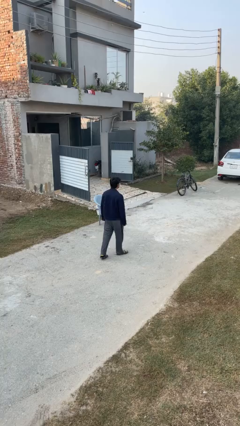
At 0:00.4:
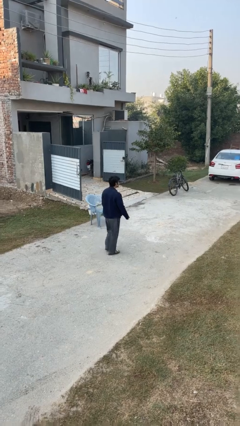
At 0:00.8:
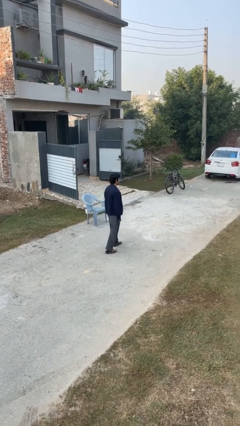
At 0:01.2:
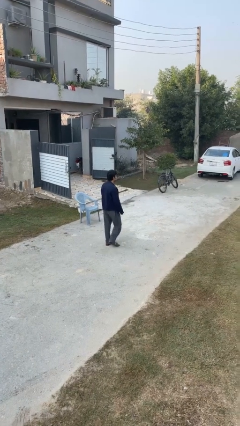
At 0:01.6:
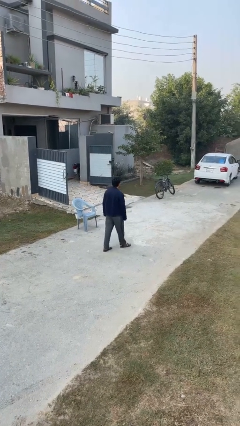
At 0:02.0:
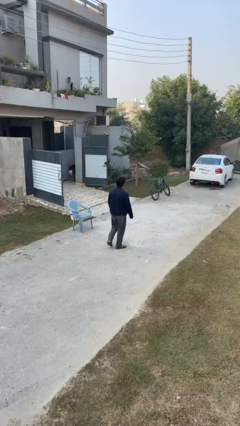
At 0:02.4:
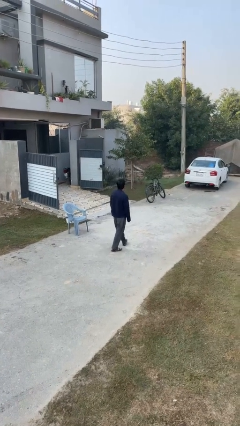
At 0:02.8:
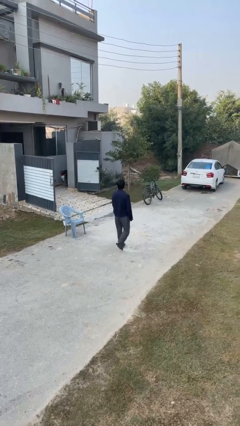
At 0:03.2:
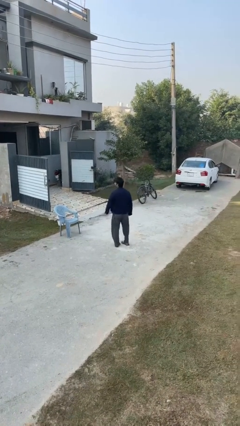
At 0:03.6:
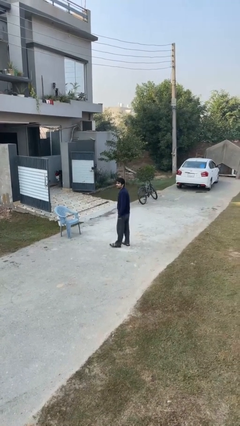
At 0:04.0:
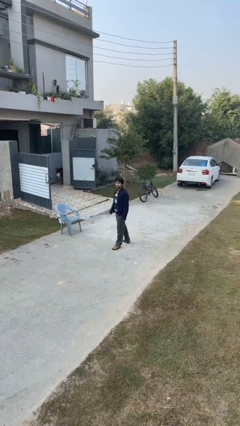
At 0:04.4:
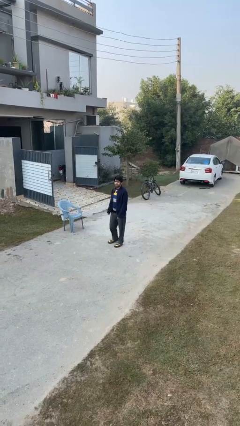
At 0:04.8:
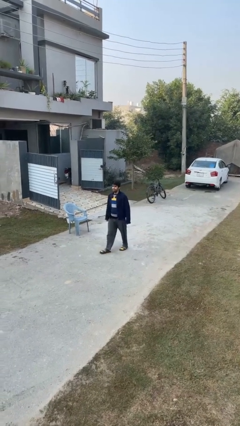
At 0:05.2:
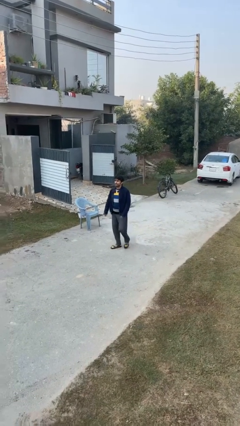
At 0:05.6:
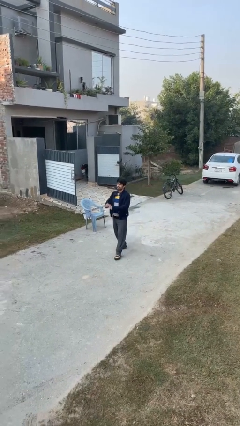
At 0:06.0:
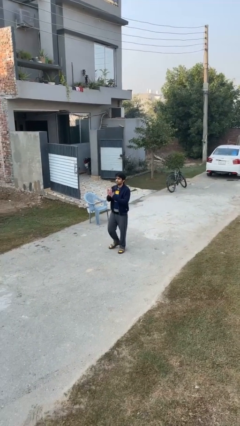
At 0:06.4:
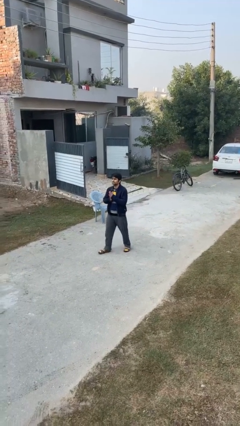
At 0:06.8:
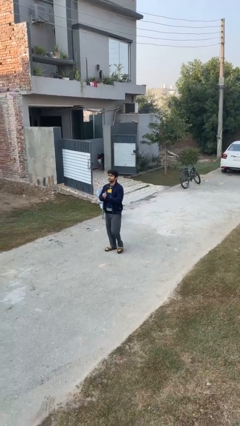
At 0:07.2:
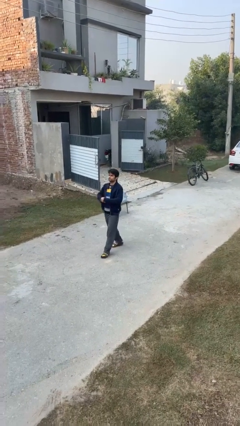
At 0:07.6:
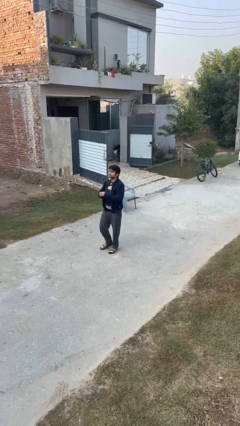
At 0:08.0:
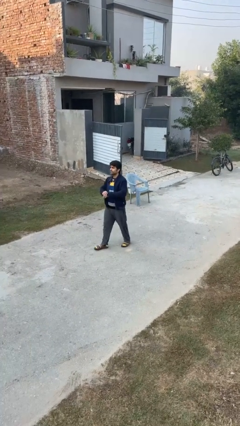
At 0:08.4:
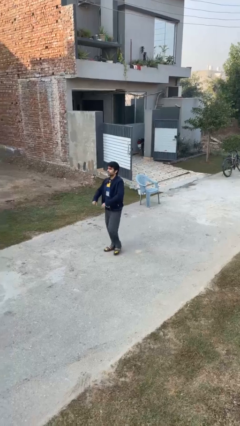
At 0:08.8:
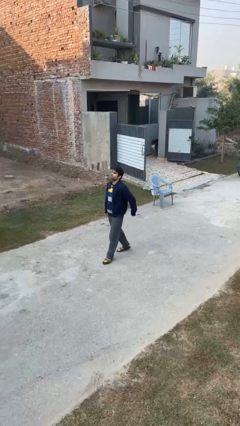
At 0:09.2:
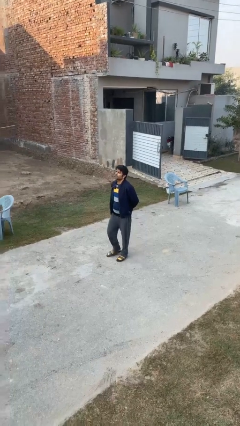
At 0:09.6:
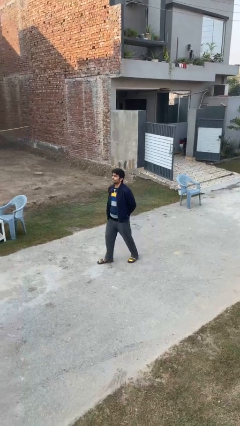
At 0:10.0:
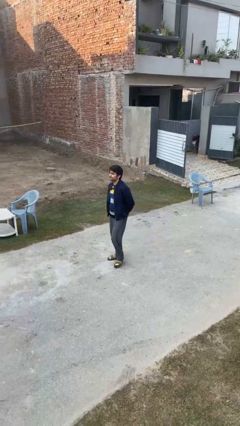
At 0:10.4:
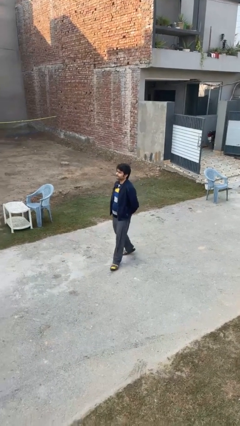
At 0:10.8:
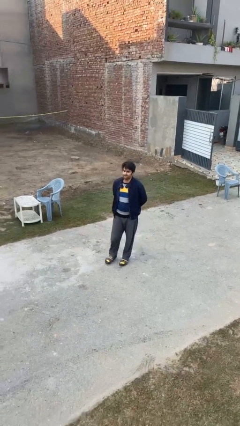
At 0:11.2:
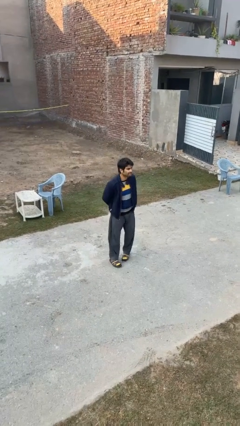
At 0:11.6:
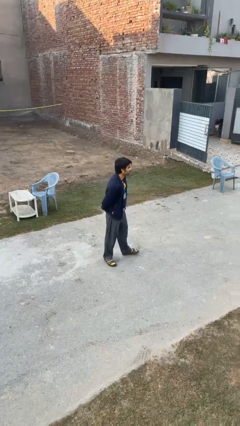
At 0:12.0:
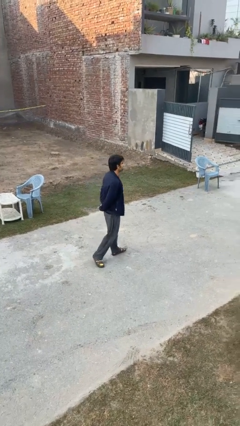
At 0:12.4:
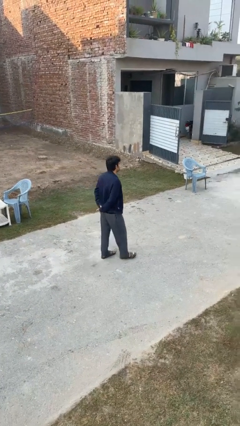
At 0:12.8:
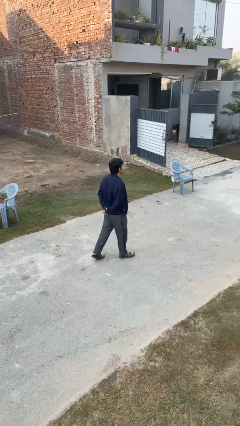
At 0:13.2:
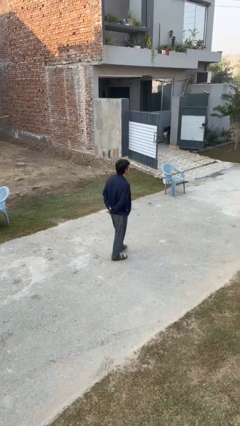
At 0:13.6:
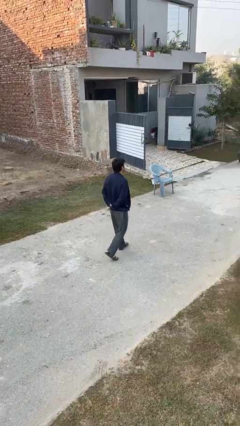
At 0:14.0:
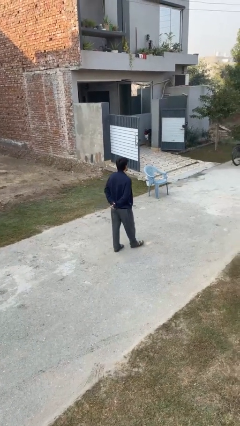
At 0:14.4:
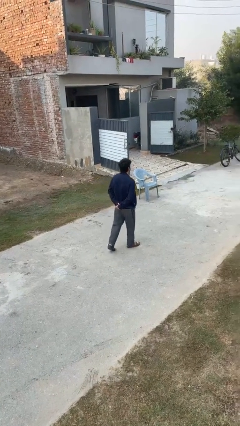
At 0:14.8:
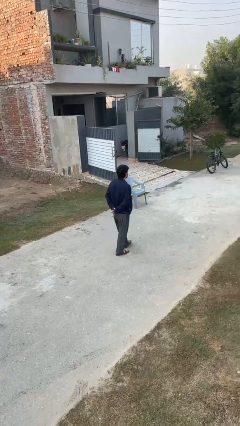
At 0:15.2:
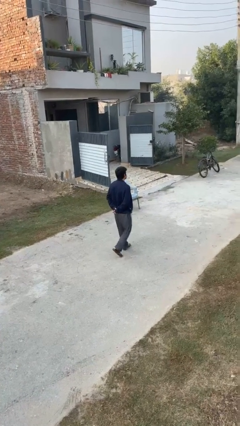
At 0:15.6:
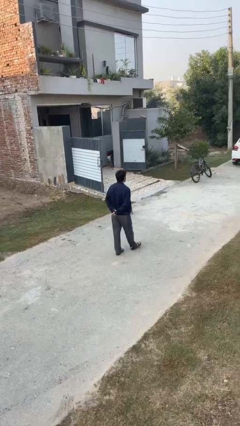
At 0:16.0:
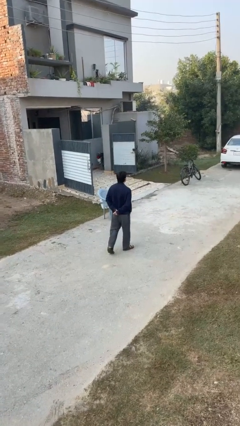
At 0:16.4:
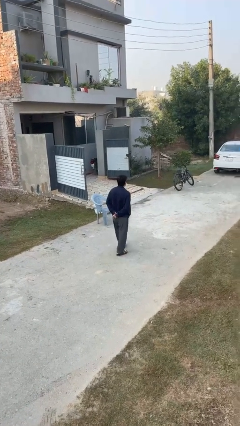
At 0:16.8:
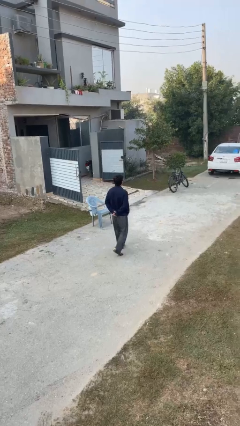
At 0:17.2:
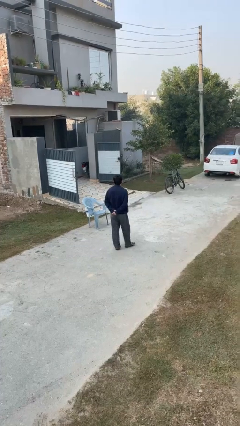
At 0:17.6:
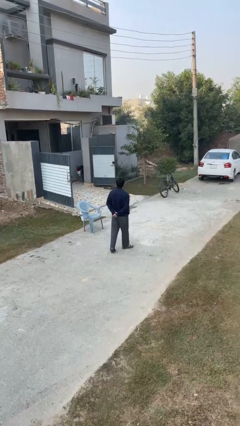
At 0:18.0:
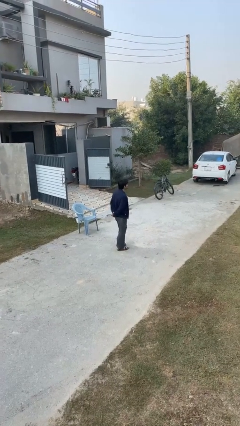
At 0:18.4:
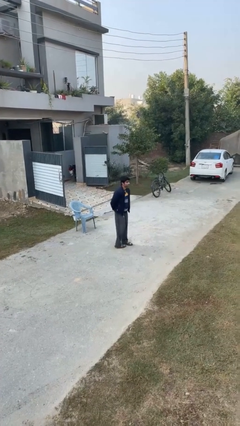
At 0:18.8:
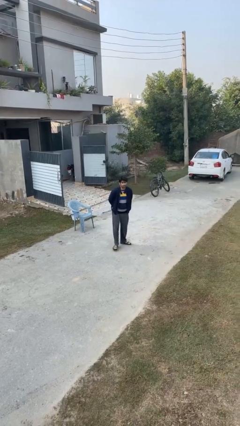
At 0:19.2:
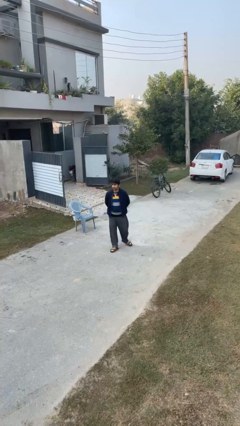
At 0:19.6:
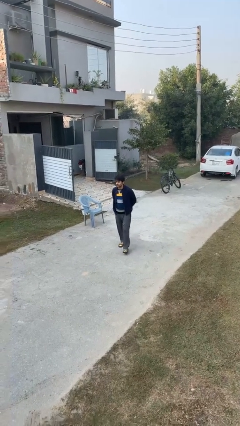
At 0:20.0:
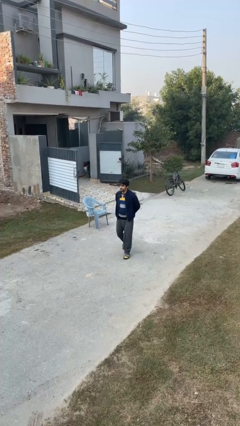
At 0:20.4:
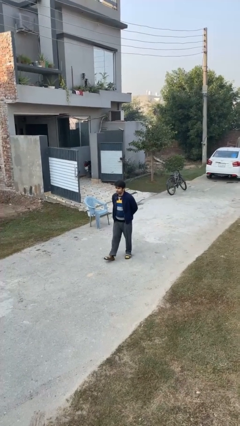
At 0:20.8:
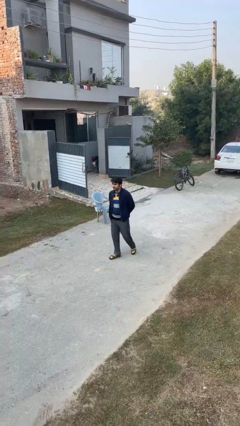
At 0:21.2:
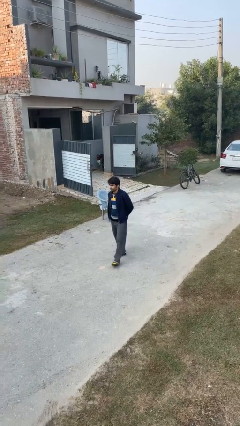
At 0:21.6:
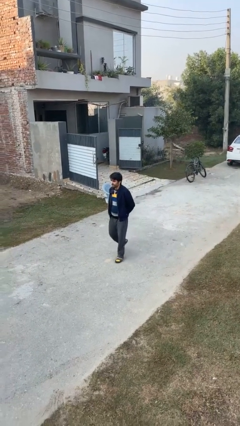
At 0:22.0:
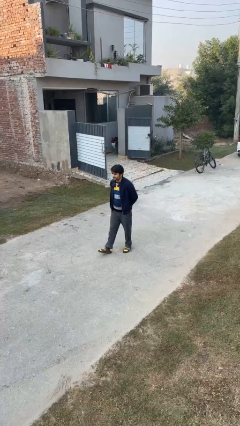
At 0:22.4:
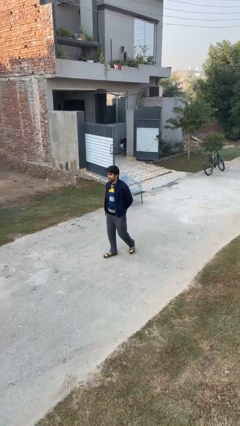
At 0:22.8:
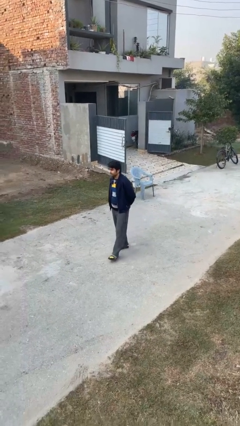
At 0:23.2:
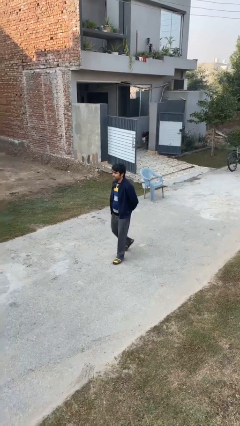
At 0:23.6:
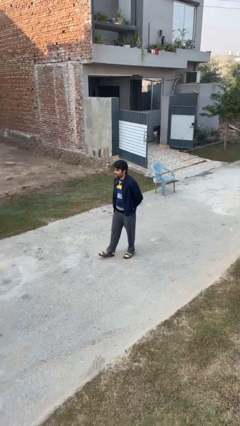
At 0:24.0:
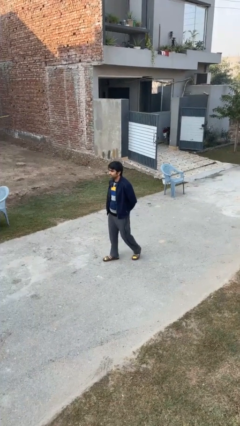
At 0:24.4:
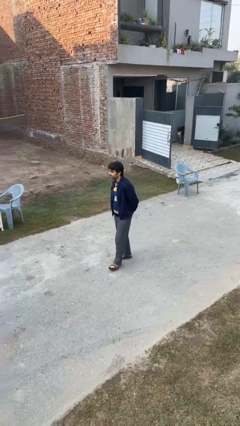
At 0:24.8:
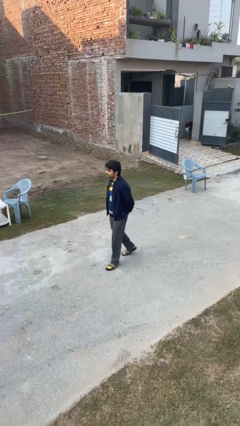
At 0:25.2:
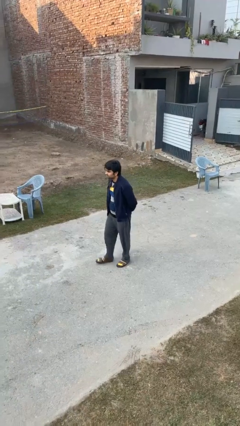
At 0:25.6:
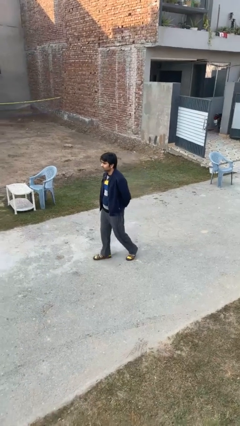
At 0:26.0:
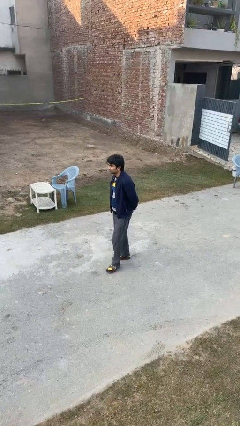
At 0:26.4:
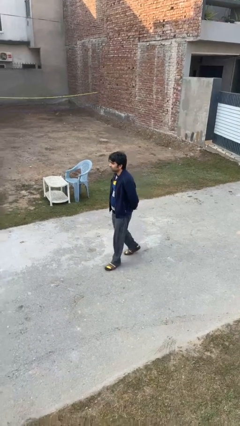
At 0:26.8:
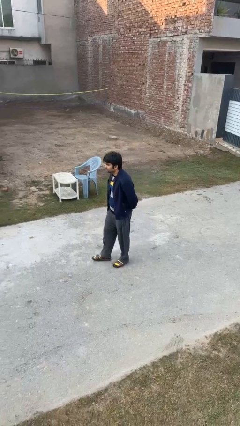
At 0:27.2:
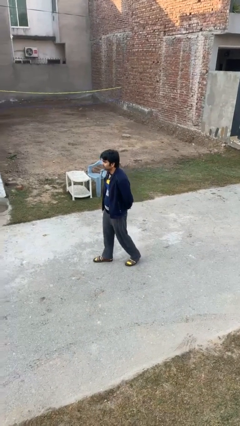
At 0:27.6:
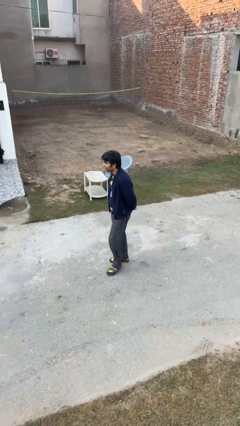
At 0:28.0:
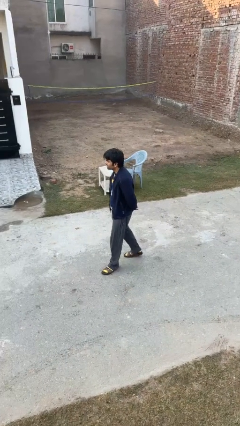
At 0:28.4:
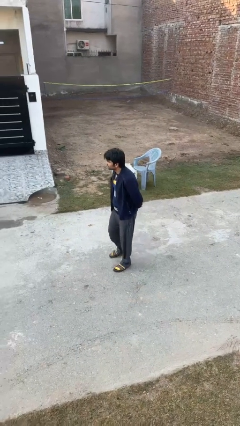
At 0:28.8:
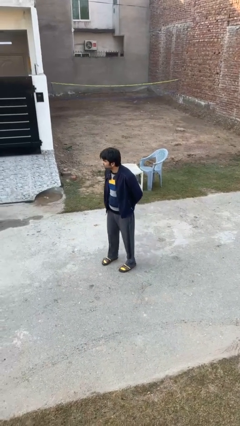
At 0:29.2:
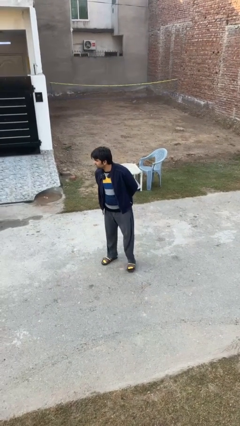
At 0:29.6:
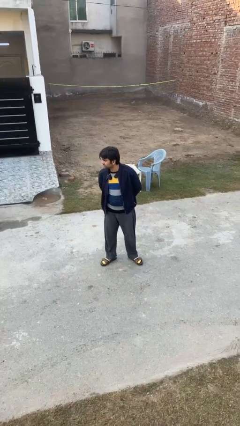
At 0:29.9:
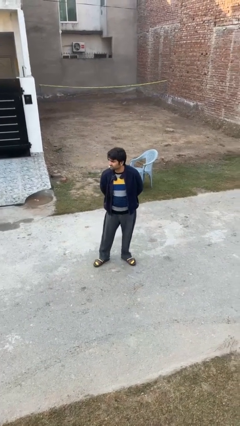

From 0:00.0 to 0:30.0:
person walks

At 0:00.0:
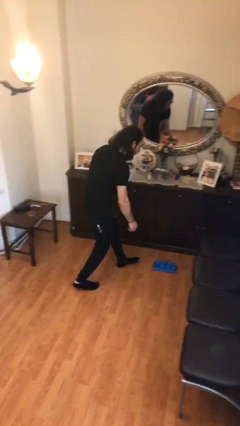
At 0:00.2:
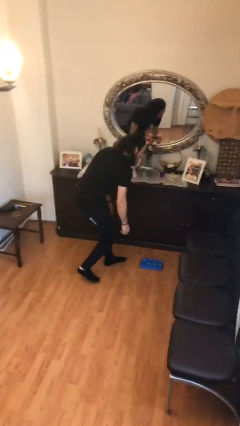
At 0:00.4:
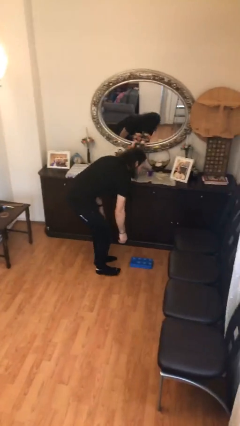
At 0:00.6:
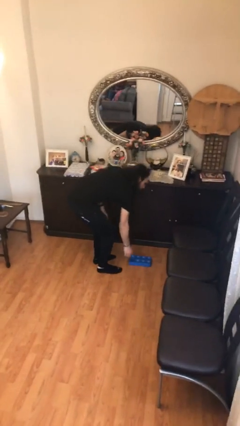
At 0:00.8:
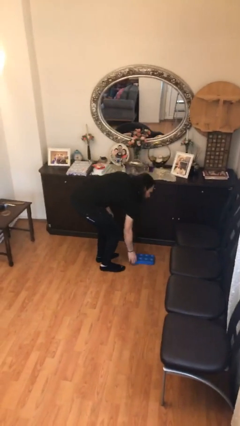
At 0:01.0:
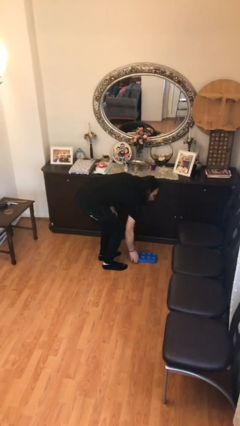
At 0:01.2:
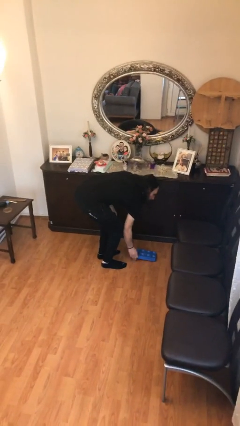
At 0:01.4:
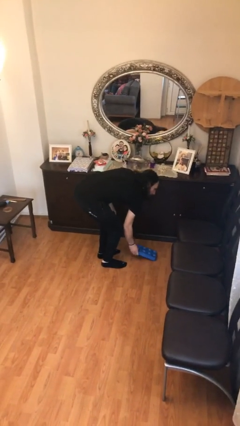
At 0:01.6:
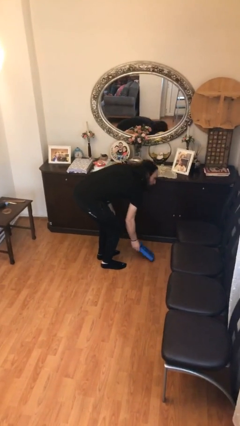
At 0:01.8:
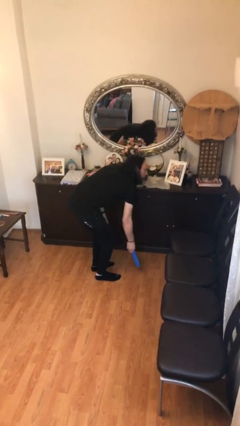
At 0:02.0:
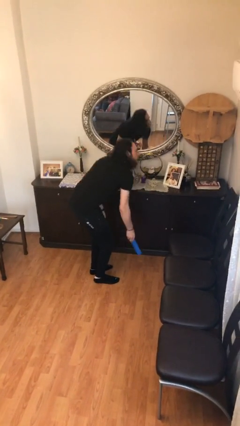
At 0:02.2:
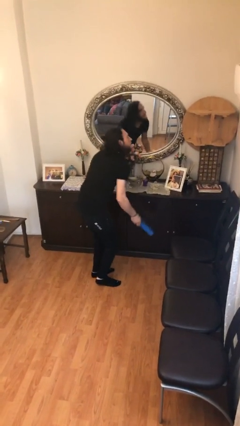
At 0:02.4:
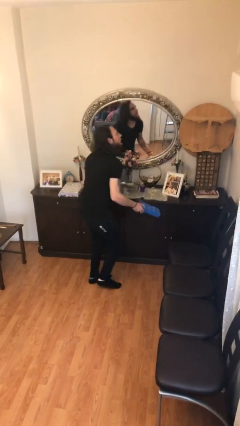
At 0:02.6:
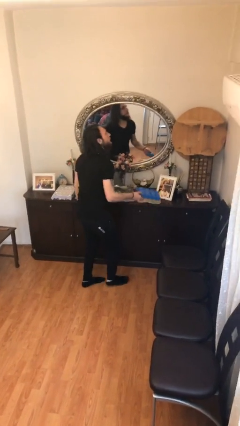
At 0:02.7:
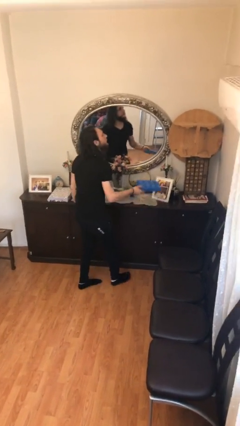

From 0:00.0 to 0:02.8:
person picks up object from floor

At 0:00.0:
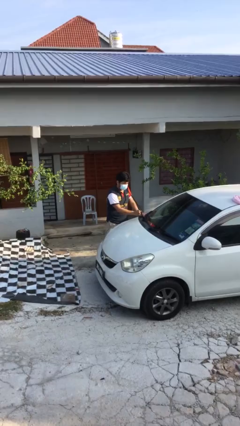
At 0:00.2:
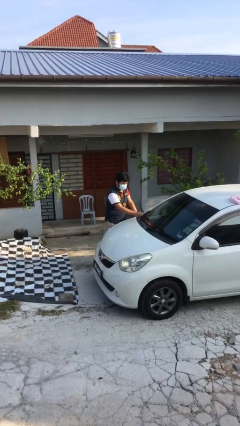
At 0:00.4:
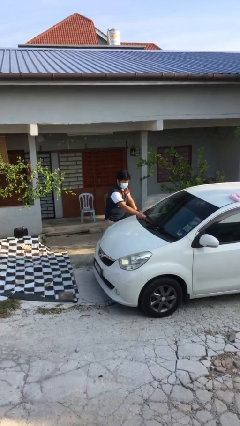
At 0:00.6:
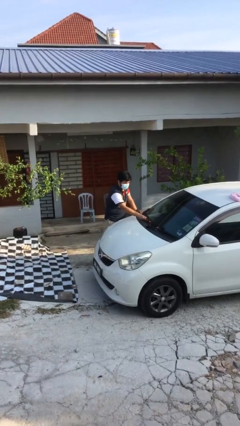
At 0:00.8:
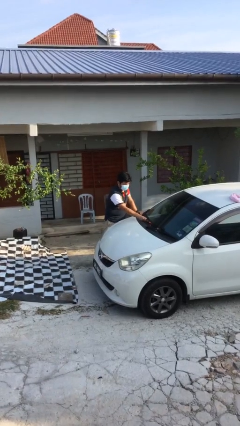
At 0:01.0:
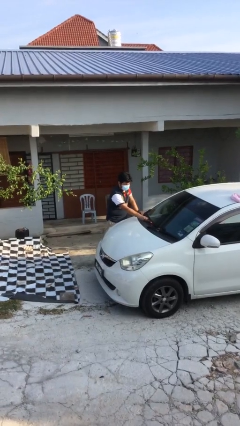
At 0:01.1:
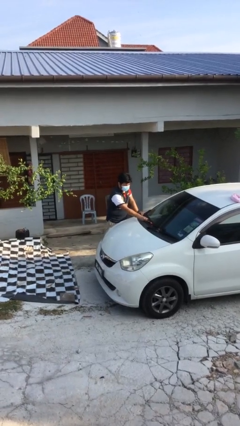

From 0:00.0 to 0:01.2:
person flips down car wipers
